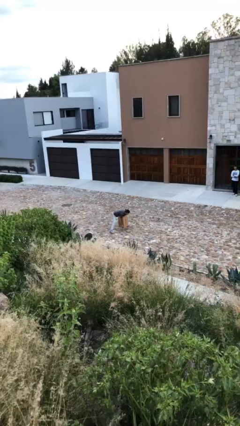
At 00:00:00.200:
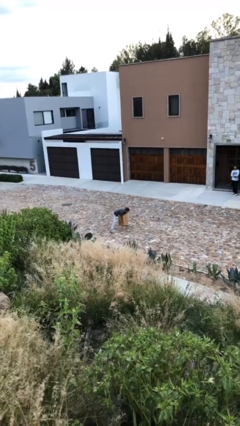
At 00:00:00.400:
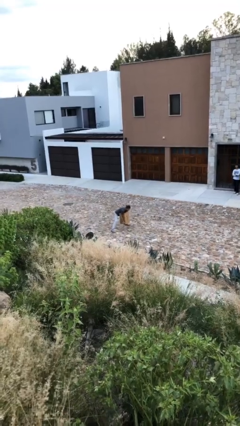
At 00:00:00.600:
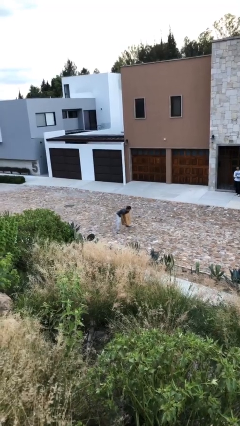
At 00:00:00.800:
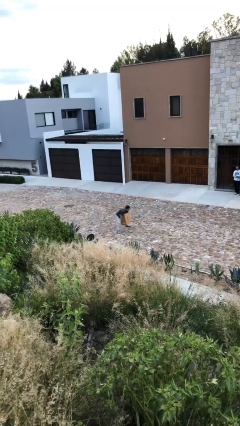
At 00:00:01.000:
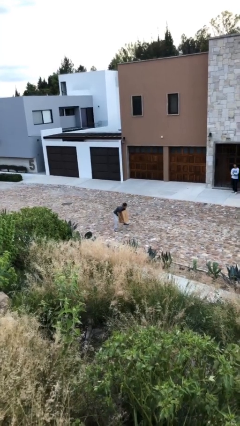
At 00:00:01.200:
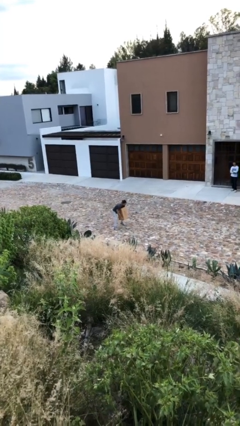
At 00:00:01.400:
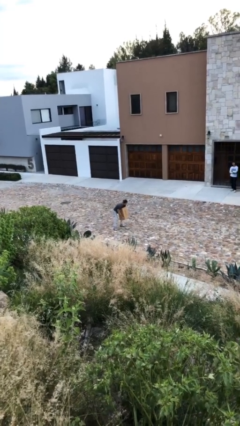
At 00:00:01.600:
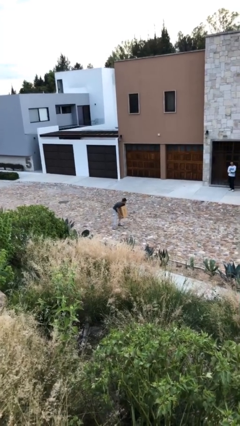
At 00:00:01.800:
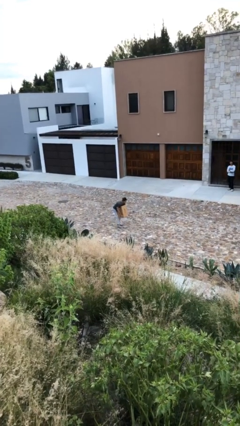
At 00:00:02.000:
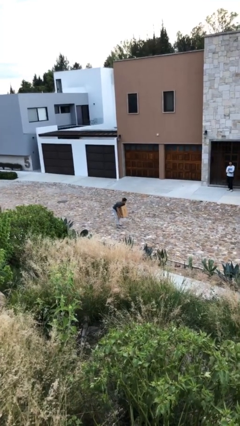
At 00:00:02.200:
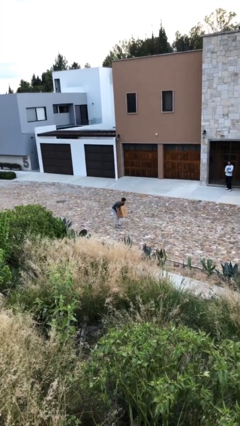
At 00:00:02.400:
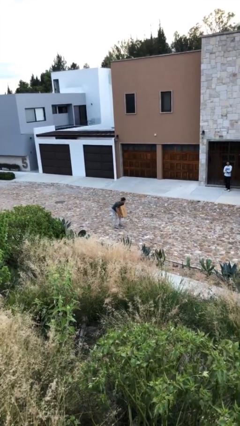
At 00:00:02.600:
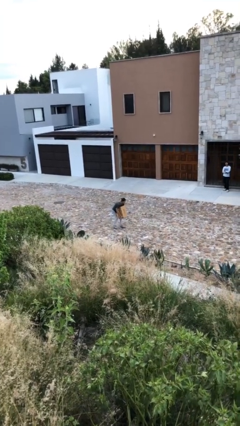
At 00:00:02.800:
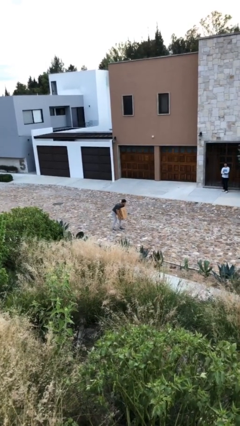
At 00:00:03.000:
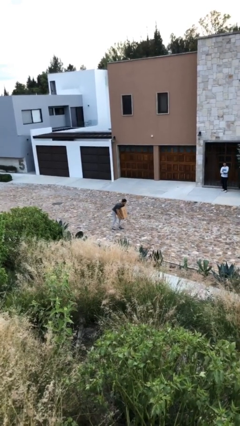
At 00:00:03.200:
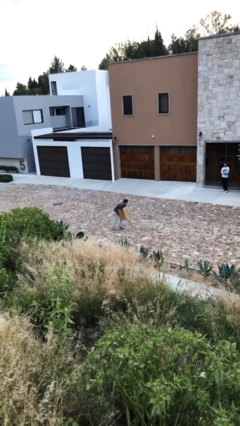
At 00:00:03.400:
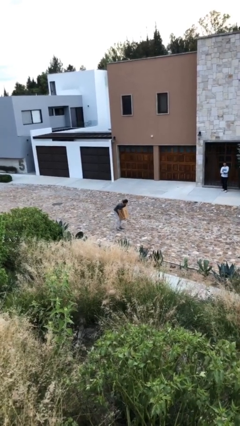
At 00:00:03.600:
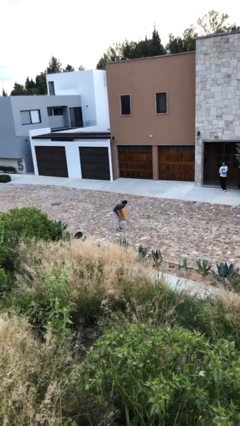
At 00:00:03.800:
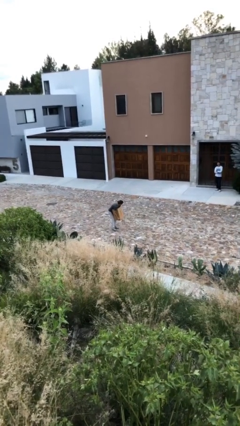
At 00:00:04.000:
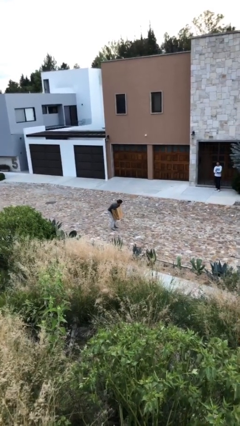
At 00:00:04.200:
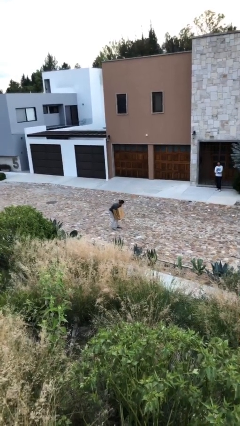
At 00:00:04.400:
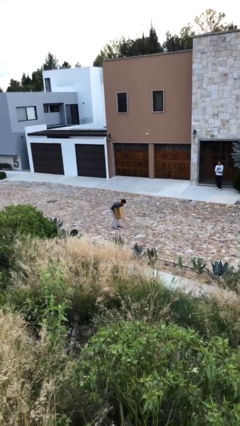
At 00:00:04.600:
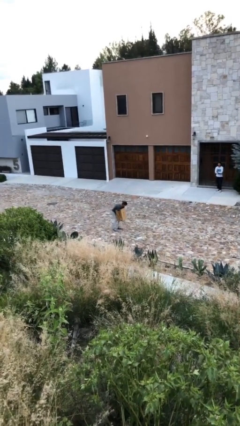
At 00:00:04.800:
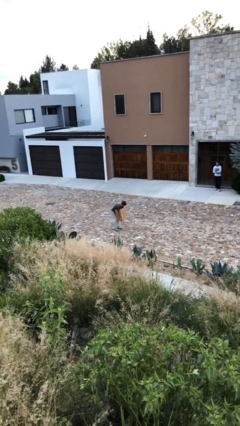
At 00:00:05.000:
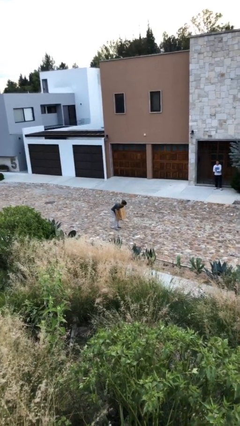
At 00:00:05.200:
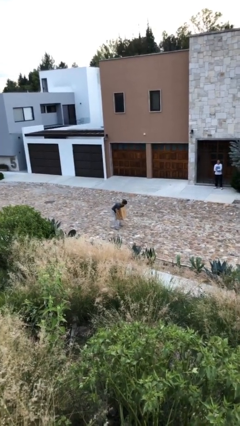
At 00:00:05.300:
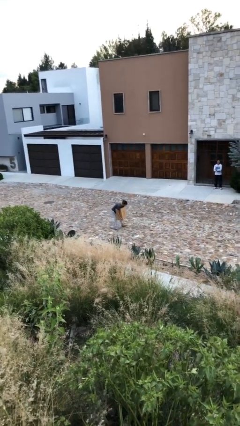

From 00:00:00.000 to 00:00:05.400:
person carries heavy object

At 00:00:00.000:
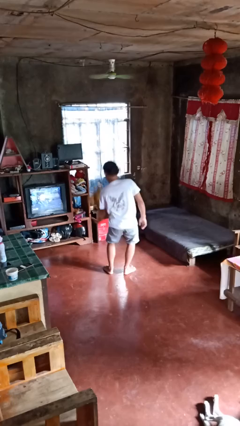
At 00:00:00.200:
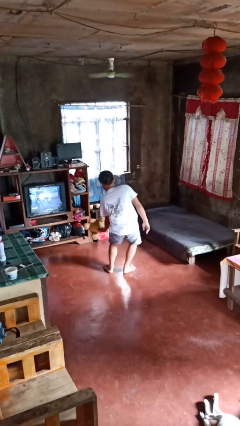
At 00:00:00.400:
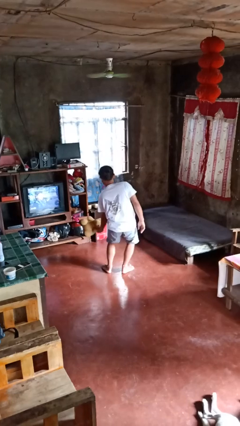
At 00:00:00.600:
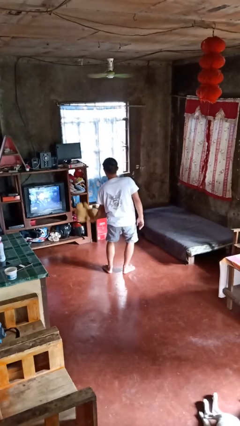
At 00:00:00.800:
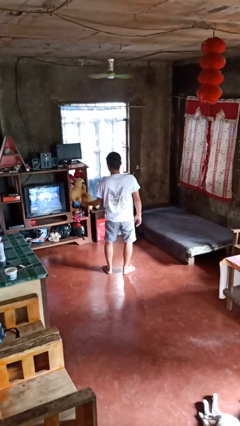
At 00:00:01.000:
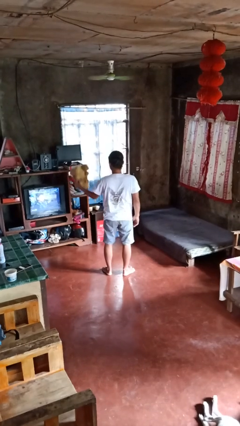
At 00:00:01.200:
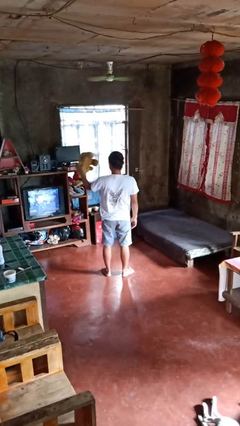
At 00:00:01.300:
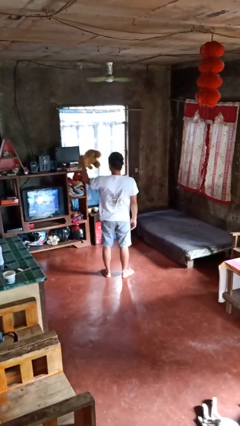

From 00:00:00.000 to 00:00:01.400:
person catches dropped object

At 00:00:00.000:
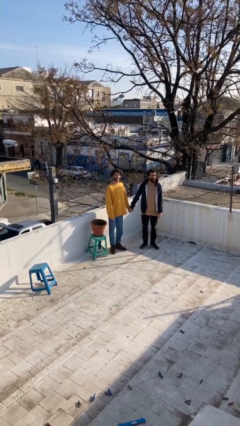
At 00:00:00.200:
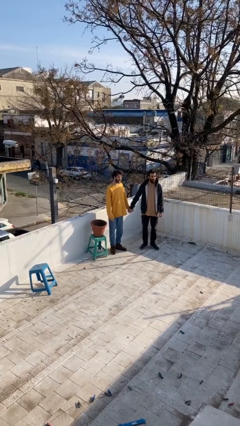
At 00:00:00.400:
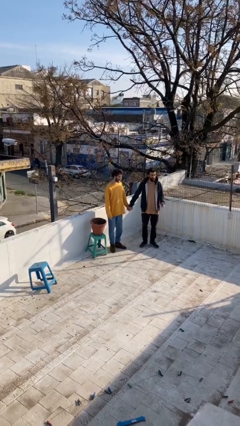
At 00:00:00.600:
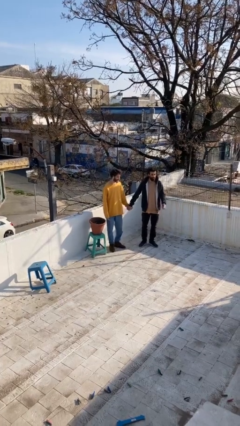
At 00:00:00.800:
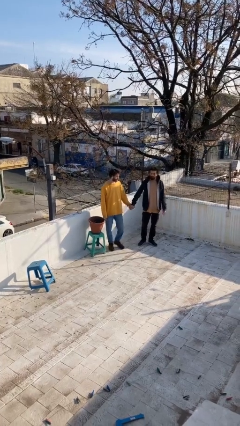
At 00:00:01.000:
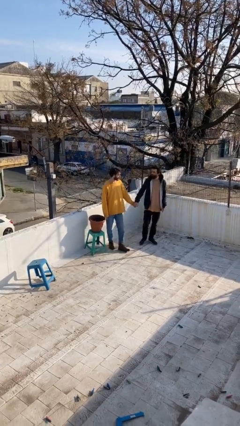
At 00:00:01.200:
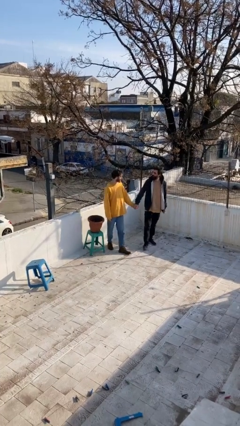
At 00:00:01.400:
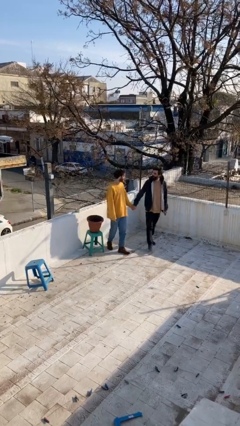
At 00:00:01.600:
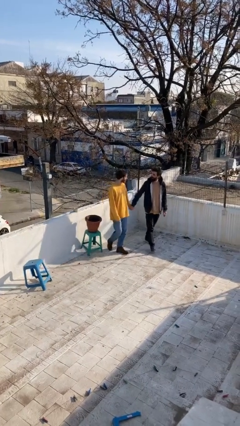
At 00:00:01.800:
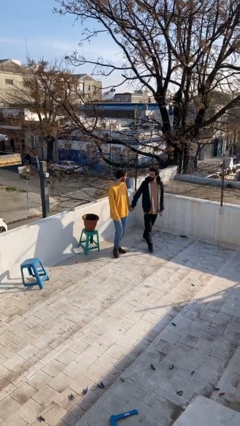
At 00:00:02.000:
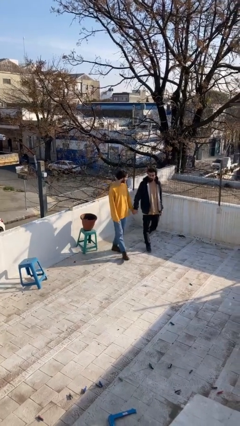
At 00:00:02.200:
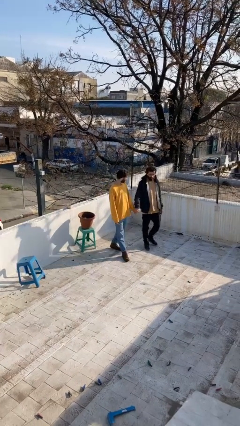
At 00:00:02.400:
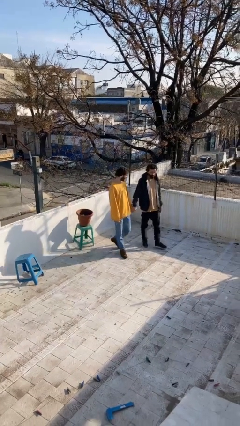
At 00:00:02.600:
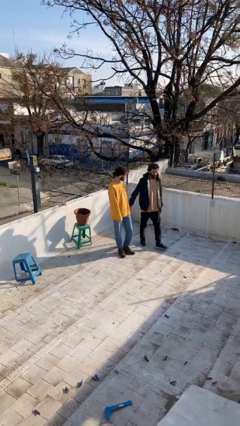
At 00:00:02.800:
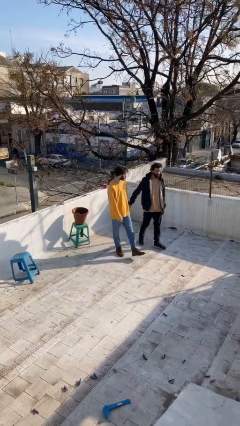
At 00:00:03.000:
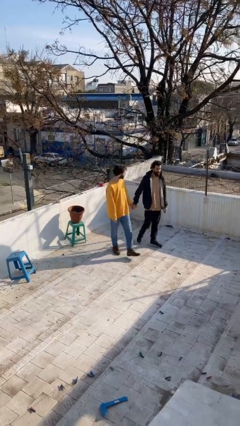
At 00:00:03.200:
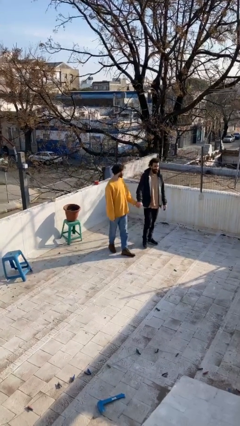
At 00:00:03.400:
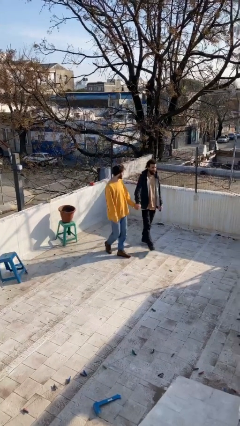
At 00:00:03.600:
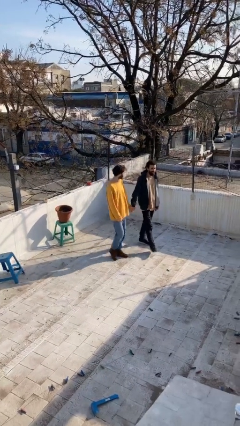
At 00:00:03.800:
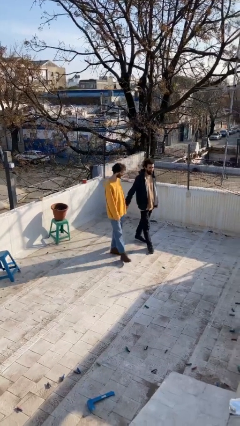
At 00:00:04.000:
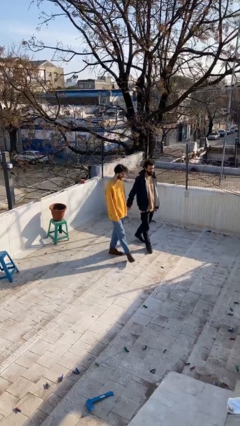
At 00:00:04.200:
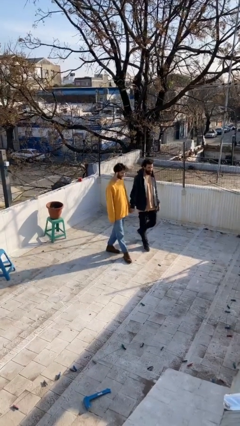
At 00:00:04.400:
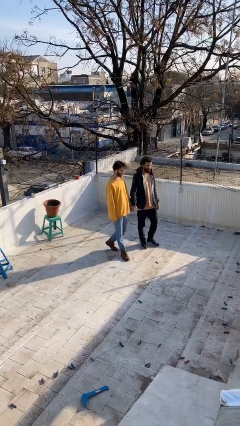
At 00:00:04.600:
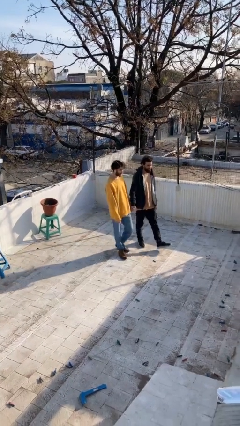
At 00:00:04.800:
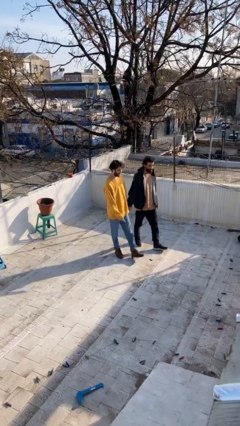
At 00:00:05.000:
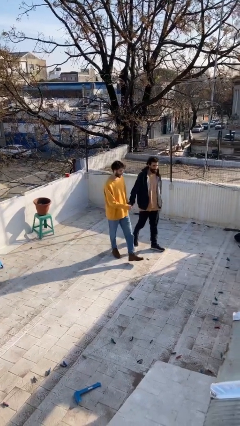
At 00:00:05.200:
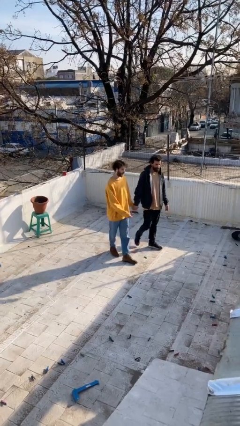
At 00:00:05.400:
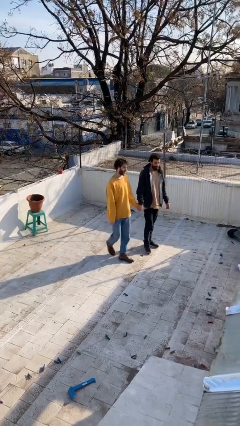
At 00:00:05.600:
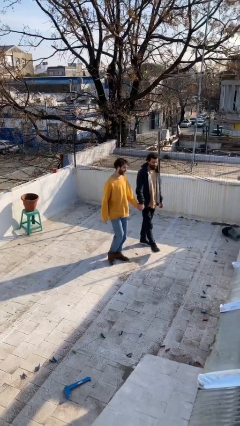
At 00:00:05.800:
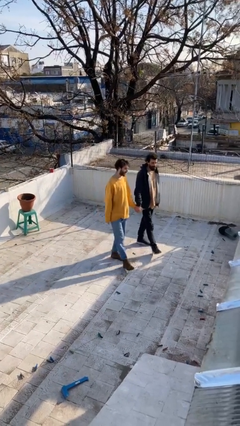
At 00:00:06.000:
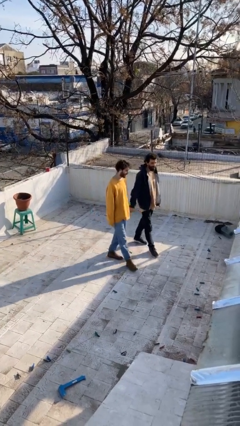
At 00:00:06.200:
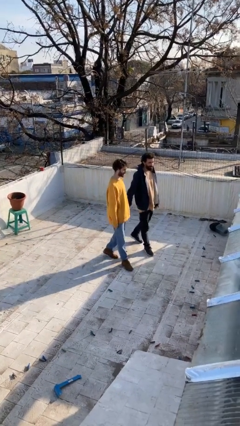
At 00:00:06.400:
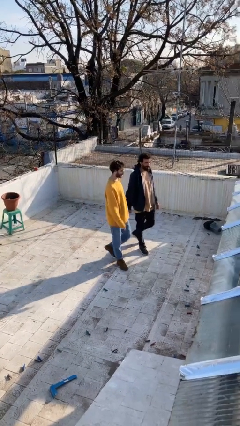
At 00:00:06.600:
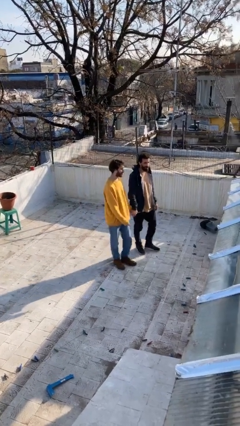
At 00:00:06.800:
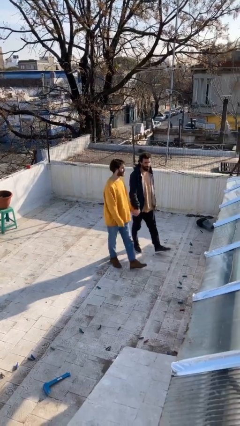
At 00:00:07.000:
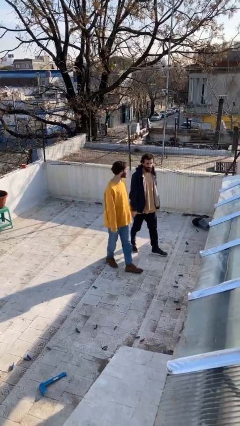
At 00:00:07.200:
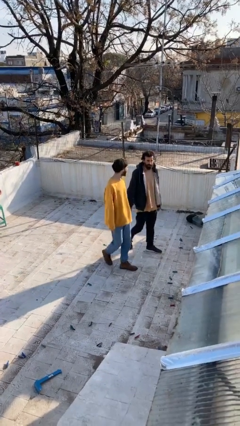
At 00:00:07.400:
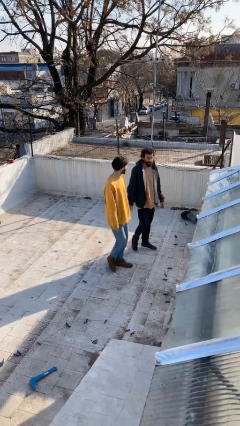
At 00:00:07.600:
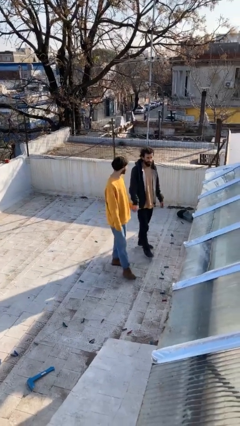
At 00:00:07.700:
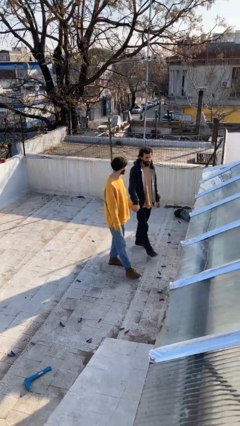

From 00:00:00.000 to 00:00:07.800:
person holds hand

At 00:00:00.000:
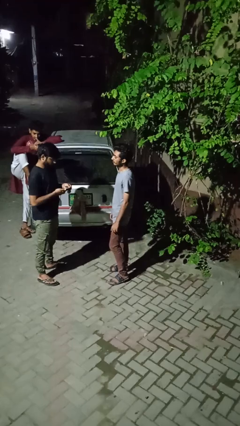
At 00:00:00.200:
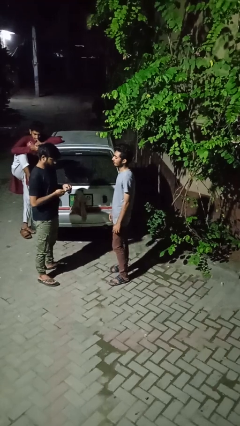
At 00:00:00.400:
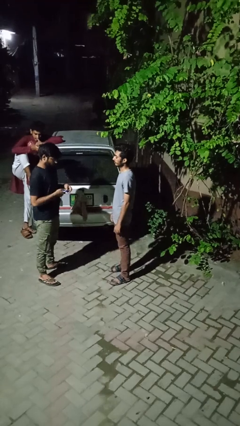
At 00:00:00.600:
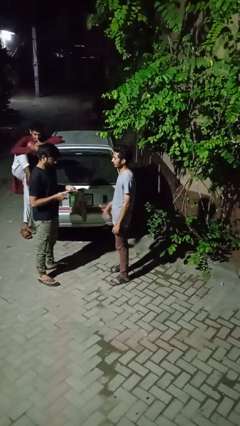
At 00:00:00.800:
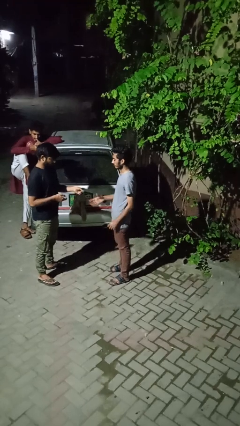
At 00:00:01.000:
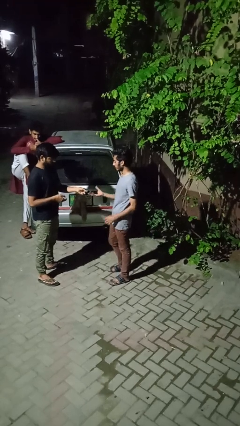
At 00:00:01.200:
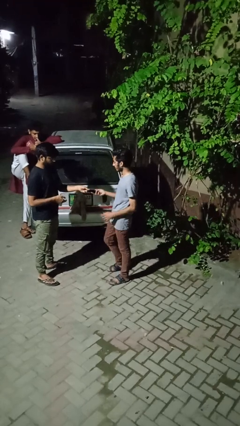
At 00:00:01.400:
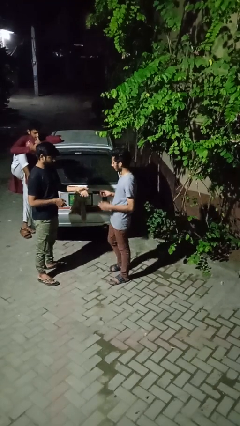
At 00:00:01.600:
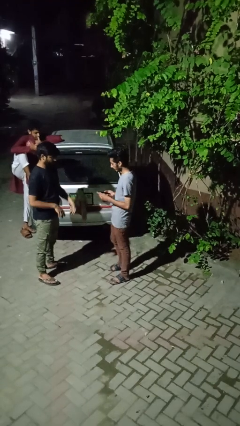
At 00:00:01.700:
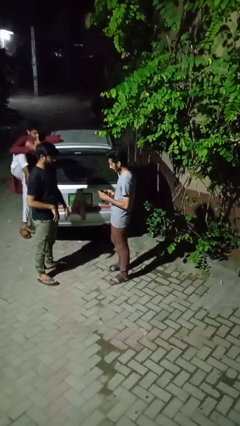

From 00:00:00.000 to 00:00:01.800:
person transfers object to person

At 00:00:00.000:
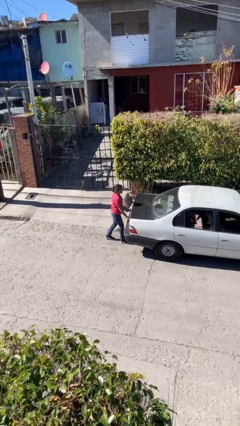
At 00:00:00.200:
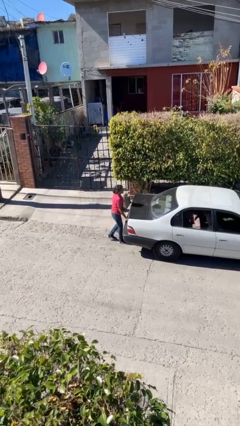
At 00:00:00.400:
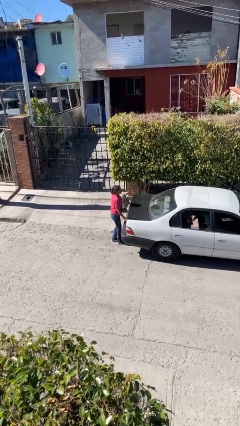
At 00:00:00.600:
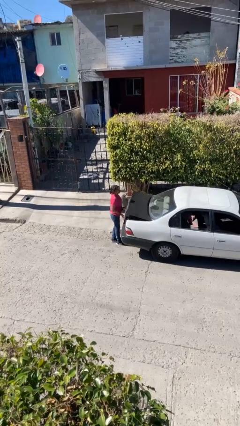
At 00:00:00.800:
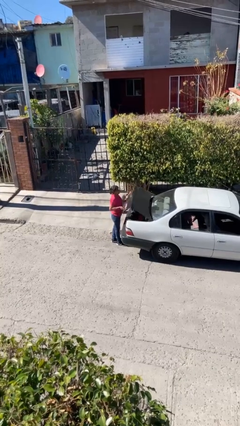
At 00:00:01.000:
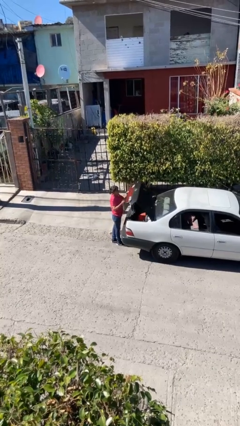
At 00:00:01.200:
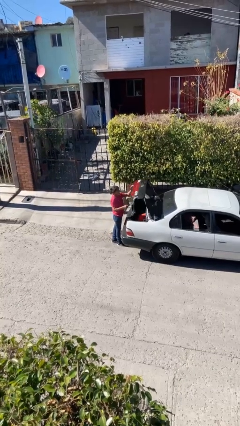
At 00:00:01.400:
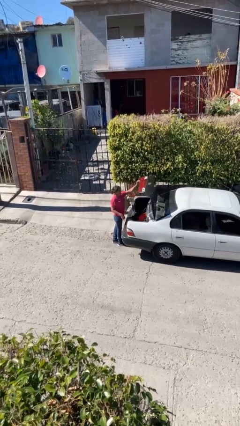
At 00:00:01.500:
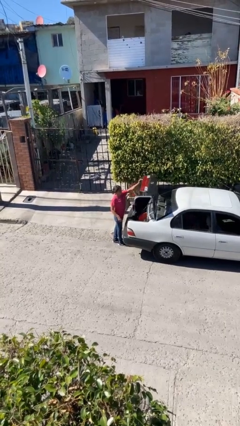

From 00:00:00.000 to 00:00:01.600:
person opens car trunk
